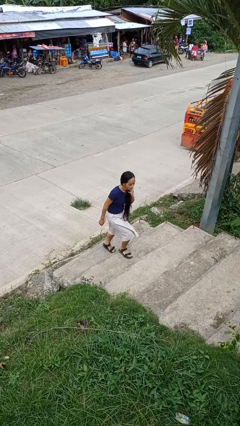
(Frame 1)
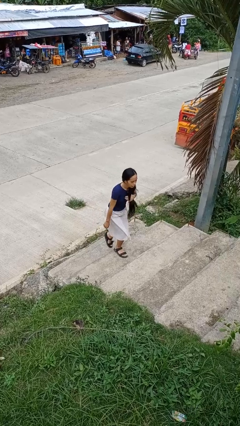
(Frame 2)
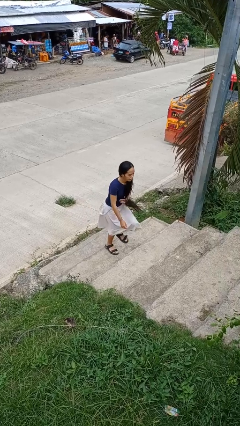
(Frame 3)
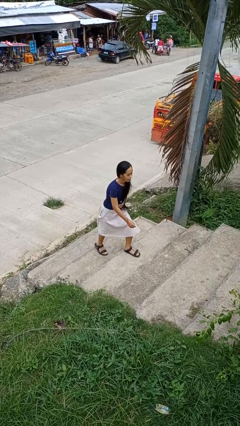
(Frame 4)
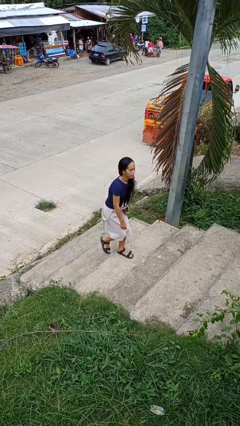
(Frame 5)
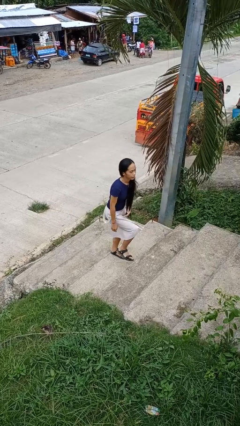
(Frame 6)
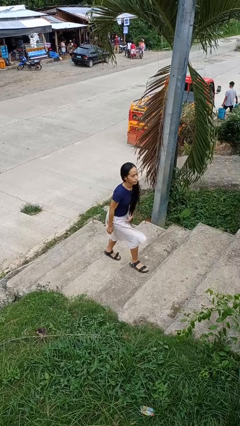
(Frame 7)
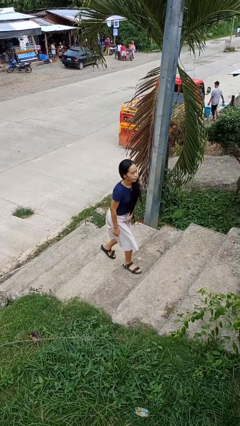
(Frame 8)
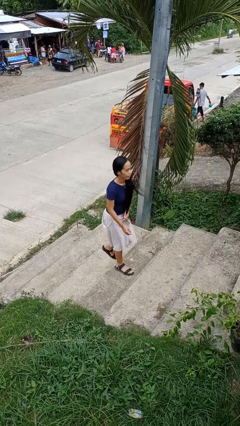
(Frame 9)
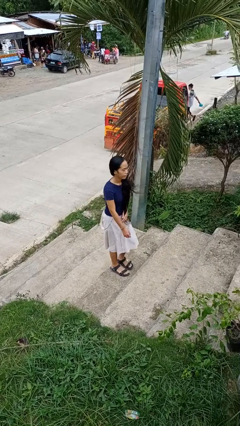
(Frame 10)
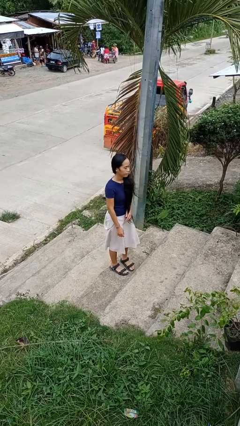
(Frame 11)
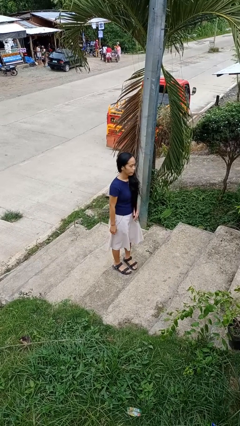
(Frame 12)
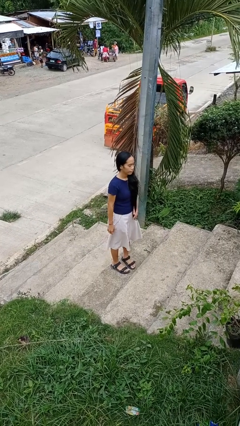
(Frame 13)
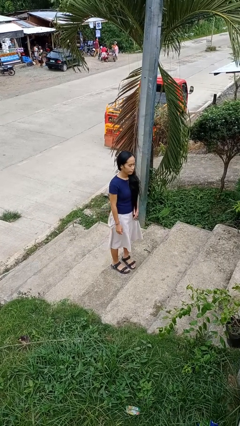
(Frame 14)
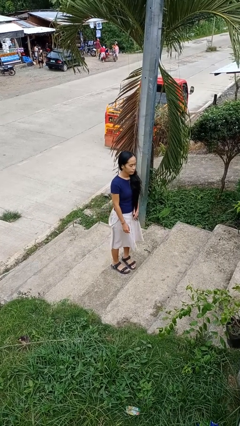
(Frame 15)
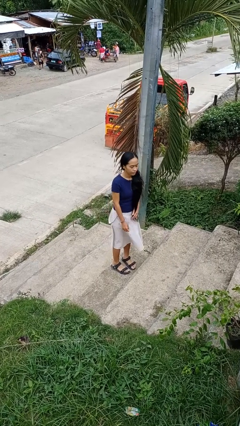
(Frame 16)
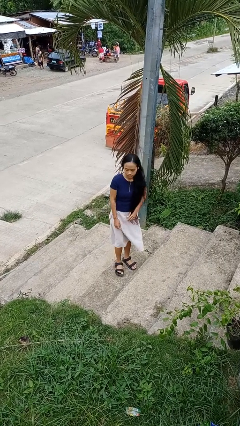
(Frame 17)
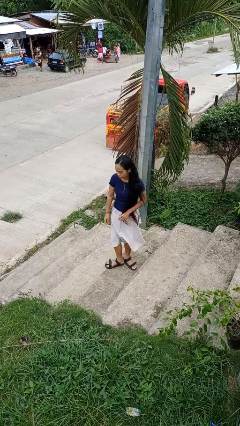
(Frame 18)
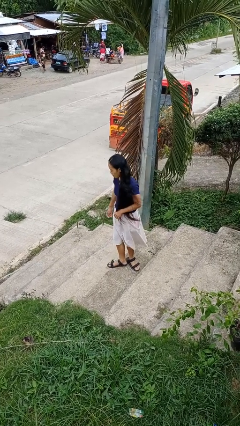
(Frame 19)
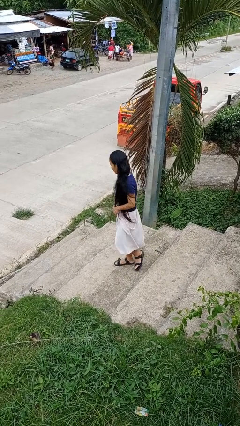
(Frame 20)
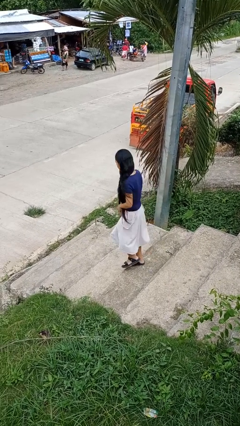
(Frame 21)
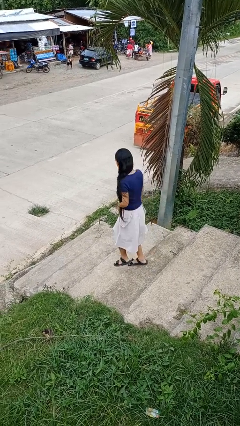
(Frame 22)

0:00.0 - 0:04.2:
person climbs up stairs

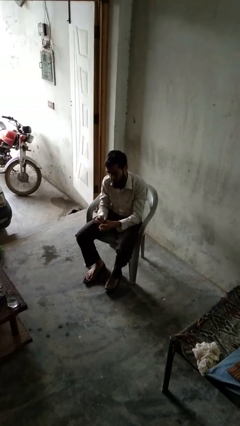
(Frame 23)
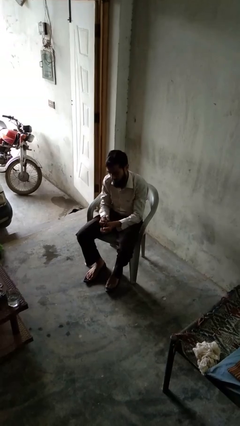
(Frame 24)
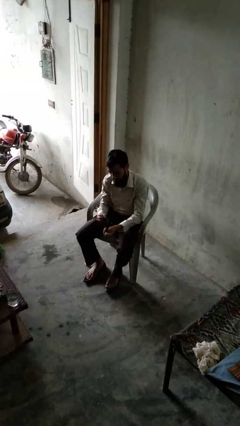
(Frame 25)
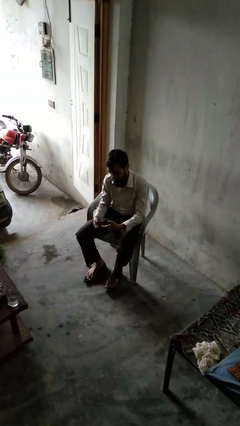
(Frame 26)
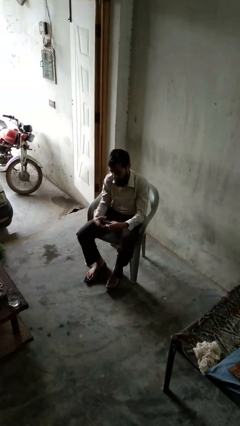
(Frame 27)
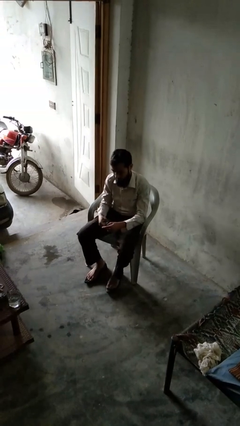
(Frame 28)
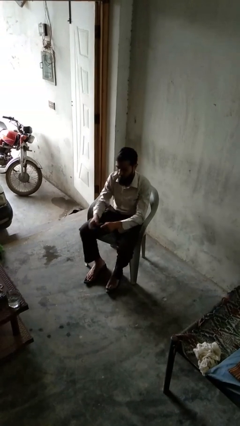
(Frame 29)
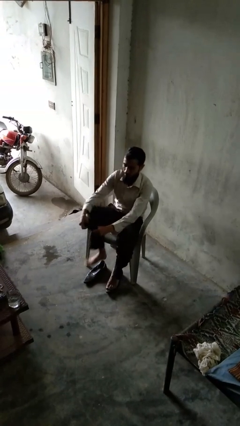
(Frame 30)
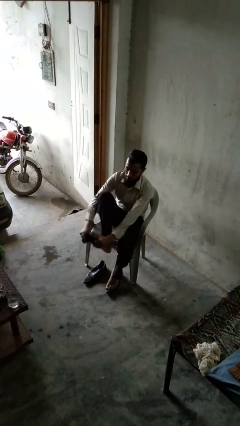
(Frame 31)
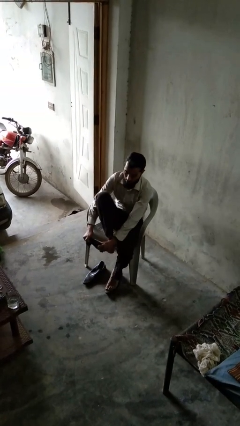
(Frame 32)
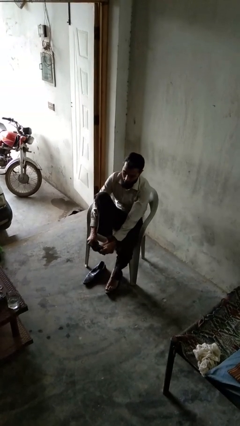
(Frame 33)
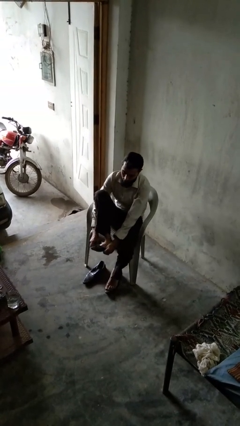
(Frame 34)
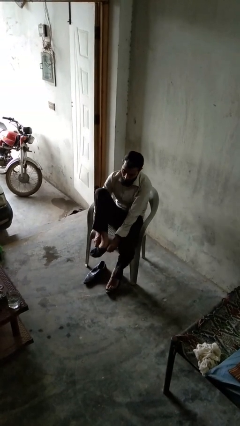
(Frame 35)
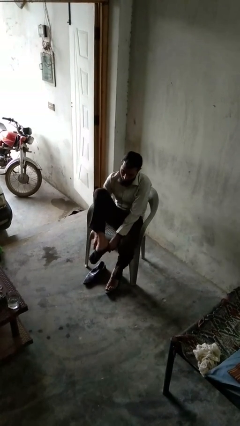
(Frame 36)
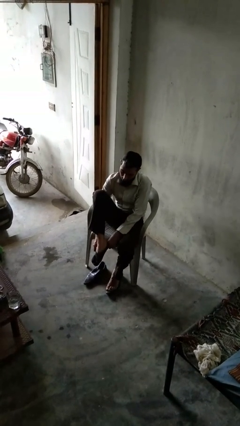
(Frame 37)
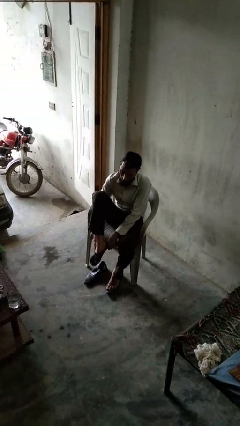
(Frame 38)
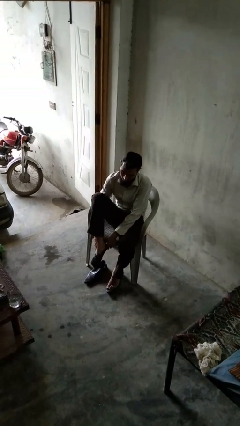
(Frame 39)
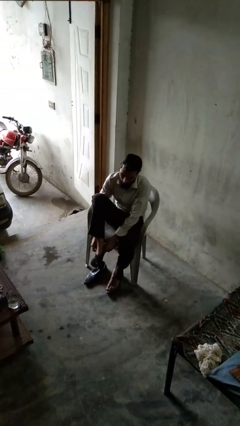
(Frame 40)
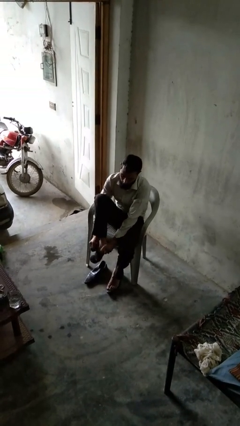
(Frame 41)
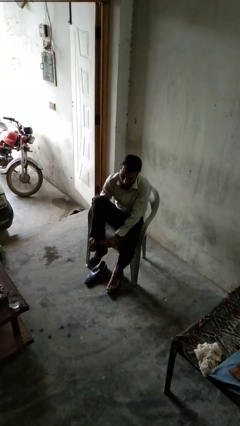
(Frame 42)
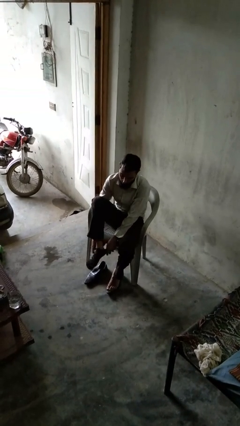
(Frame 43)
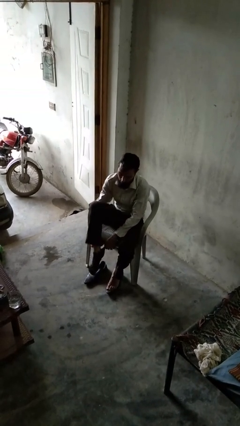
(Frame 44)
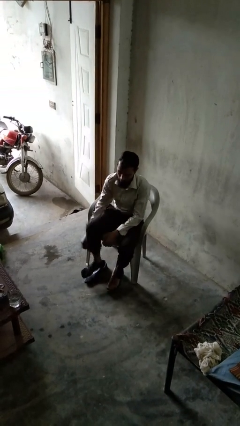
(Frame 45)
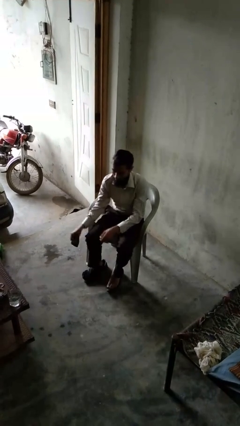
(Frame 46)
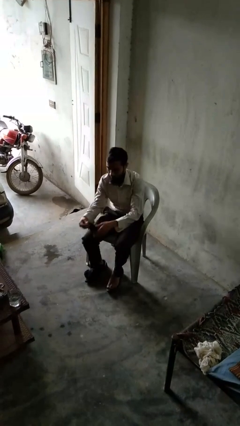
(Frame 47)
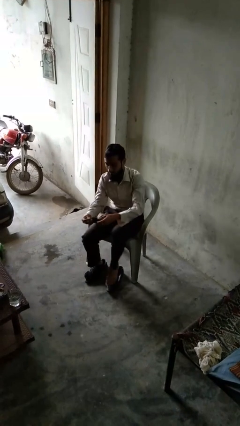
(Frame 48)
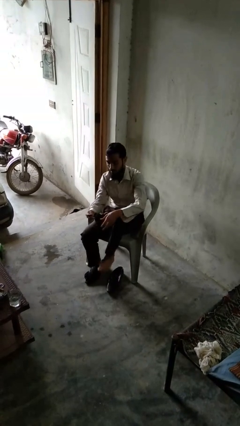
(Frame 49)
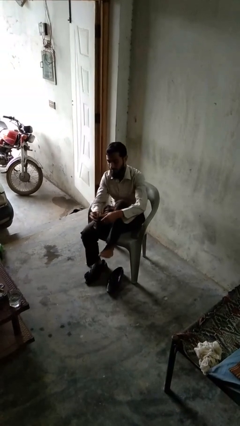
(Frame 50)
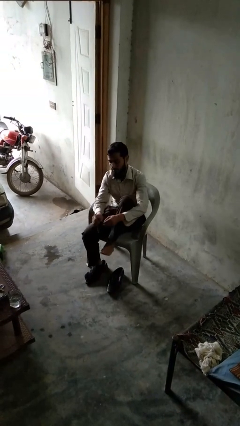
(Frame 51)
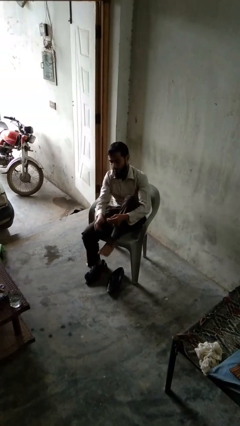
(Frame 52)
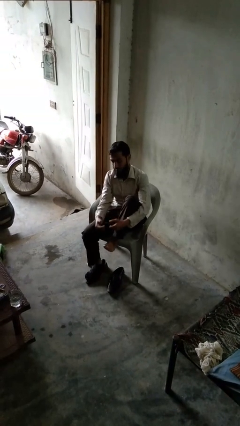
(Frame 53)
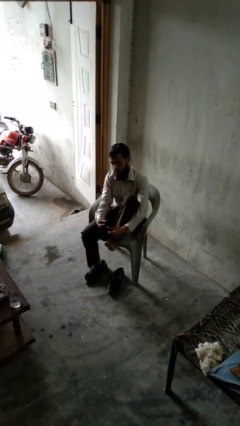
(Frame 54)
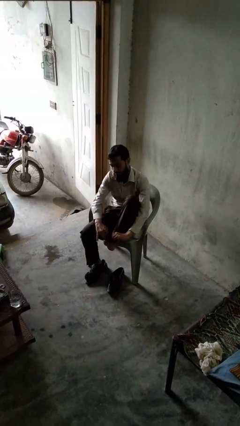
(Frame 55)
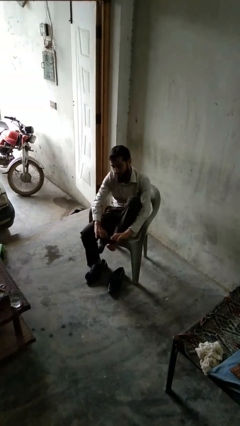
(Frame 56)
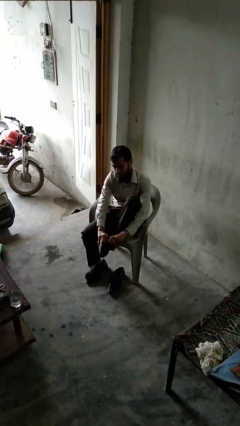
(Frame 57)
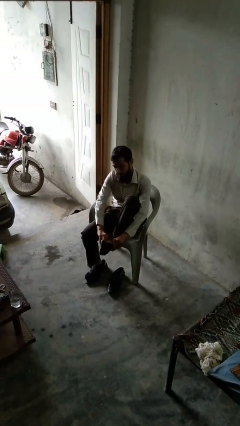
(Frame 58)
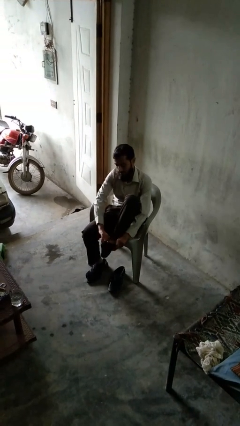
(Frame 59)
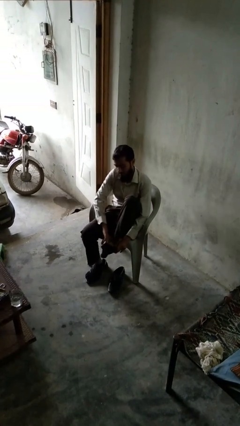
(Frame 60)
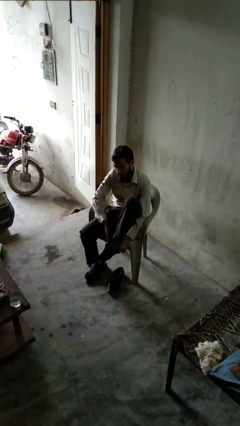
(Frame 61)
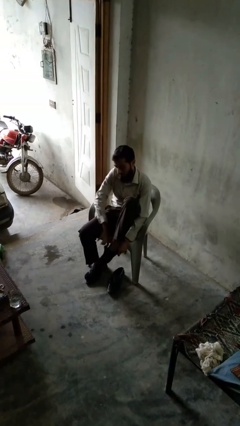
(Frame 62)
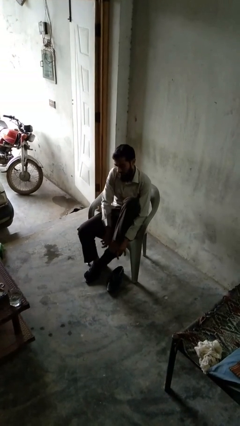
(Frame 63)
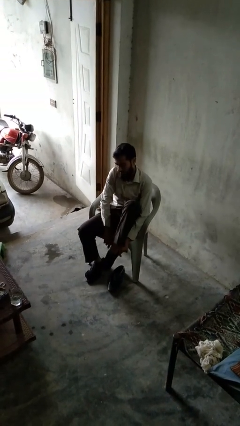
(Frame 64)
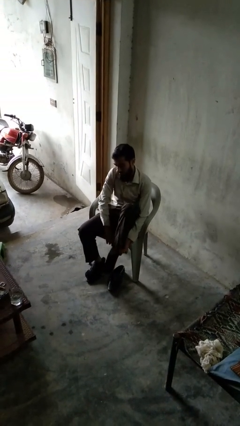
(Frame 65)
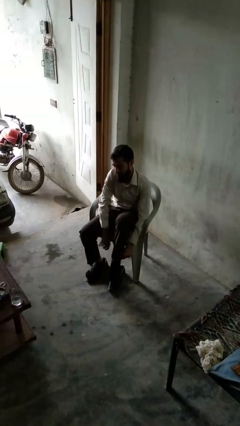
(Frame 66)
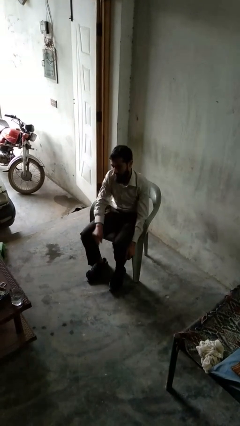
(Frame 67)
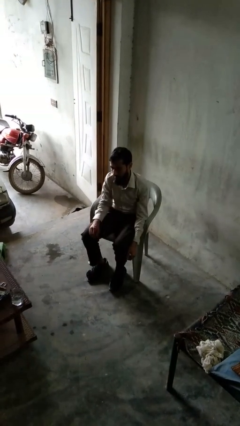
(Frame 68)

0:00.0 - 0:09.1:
person puts on socks

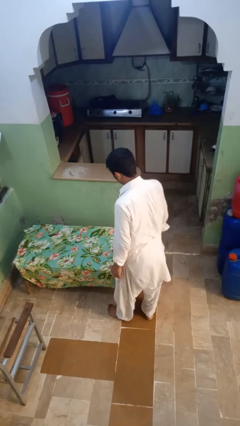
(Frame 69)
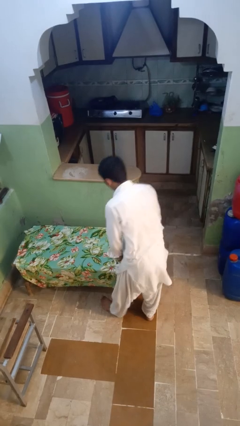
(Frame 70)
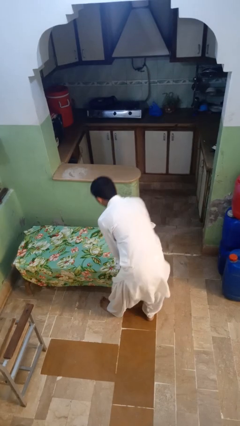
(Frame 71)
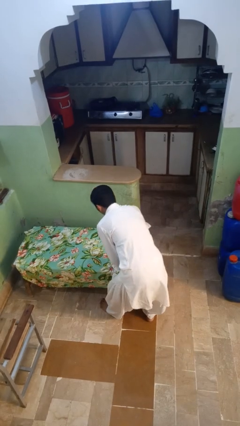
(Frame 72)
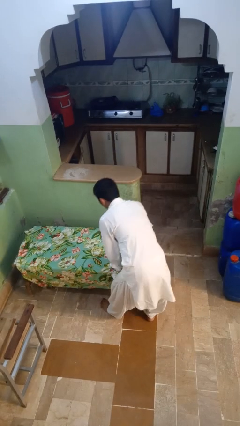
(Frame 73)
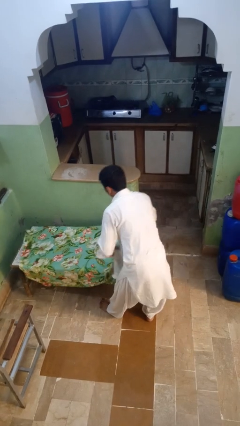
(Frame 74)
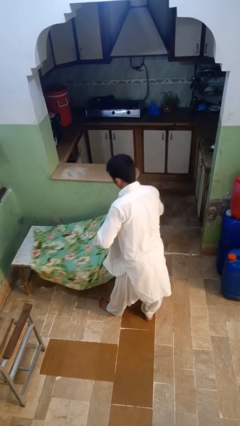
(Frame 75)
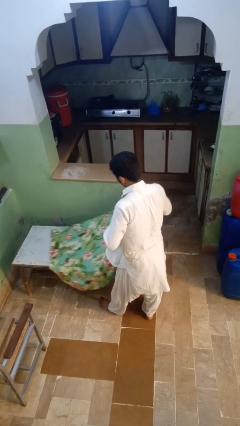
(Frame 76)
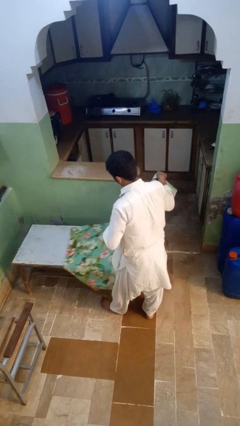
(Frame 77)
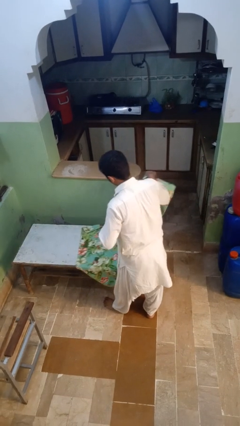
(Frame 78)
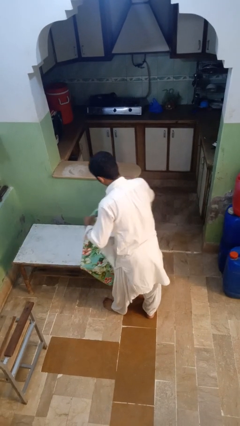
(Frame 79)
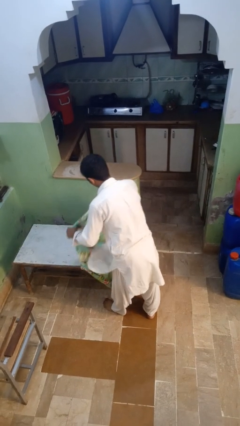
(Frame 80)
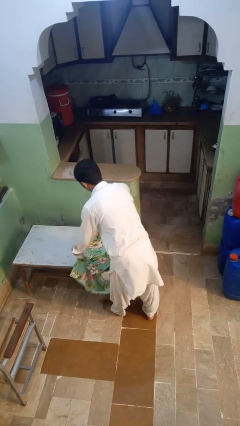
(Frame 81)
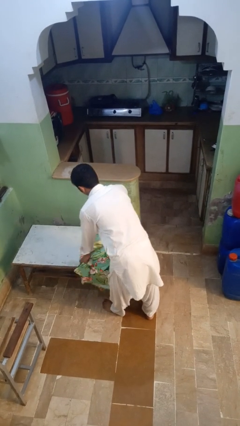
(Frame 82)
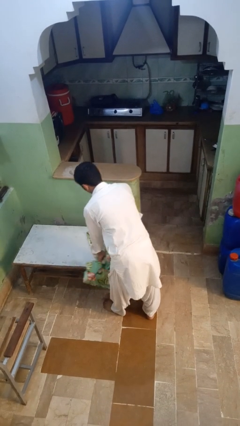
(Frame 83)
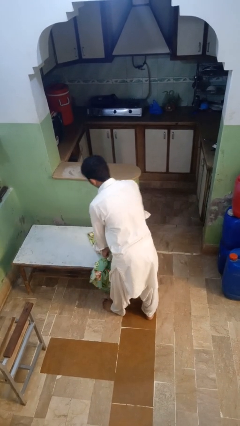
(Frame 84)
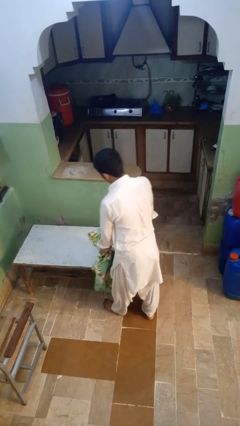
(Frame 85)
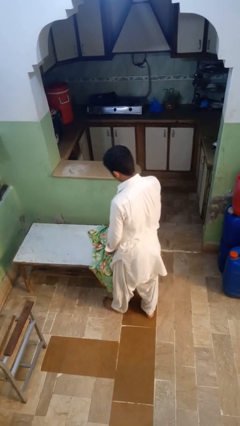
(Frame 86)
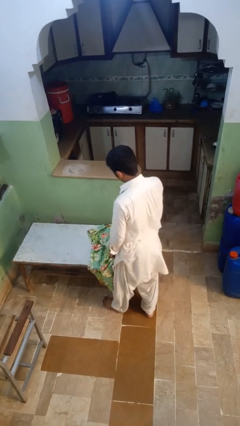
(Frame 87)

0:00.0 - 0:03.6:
person folds tablecloth

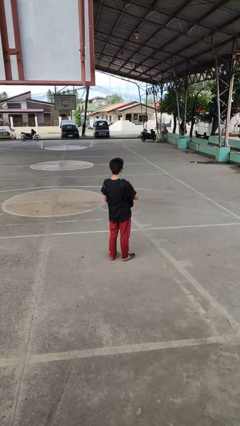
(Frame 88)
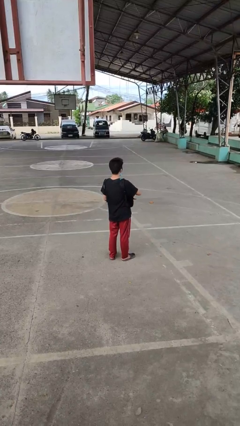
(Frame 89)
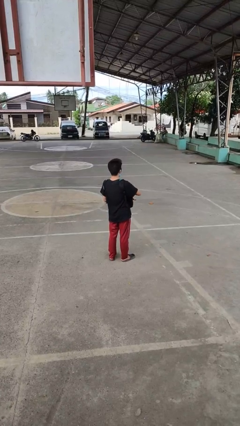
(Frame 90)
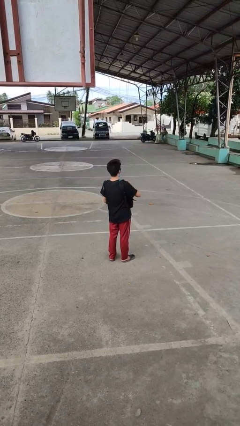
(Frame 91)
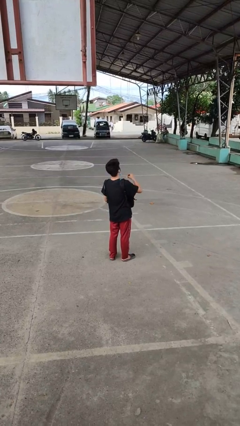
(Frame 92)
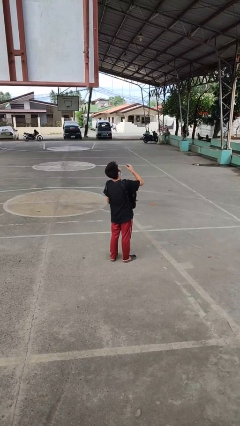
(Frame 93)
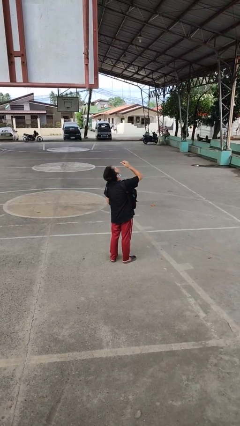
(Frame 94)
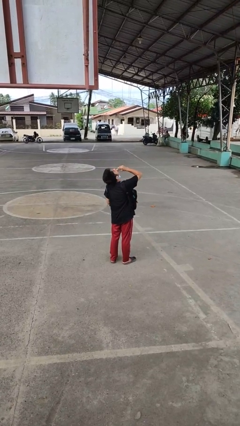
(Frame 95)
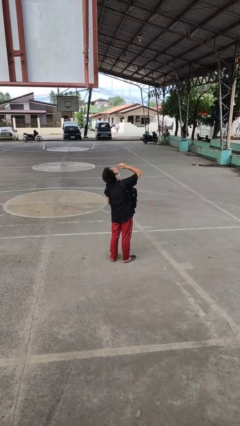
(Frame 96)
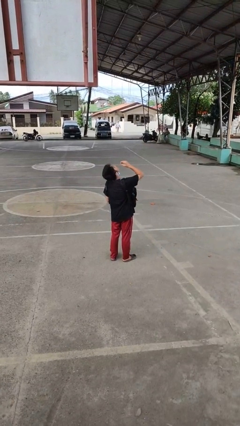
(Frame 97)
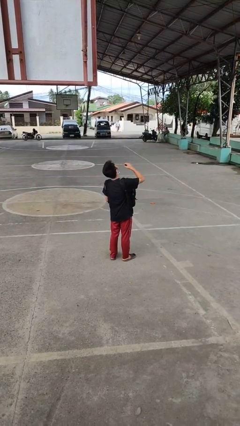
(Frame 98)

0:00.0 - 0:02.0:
person eats snack from bag
